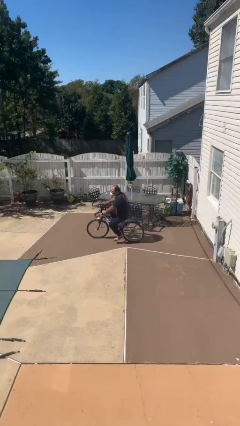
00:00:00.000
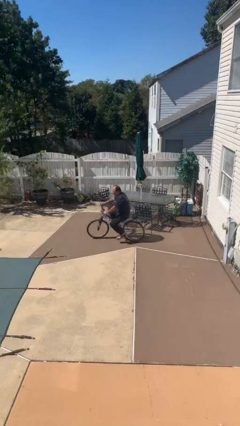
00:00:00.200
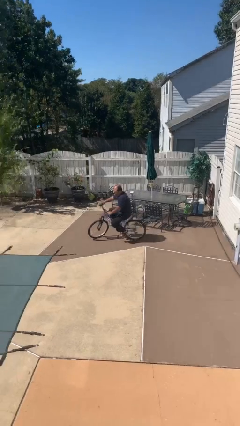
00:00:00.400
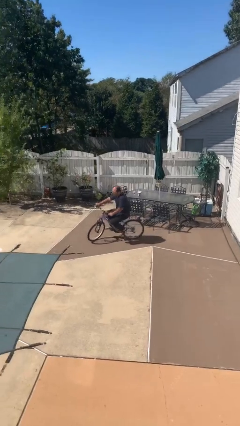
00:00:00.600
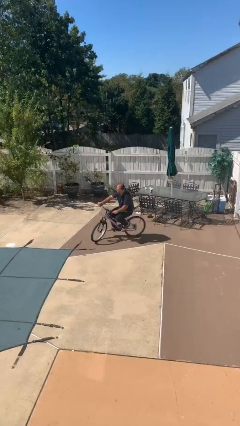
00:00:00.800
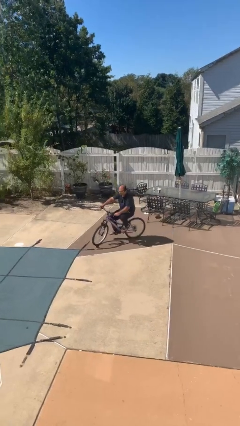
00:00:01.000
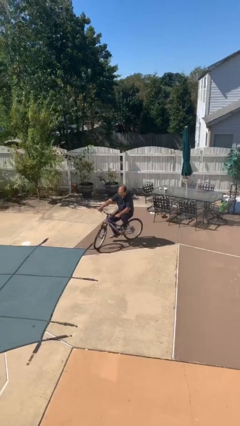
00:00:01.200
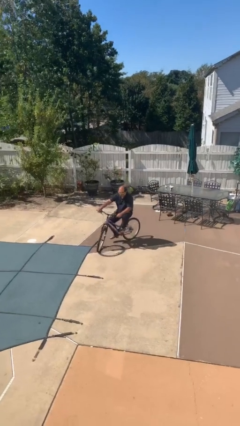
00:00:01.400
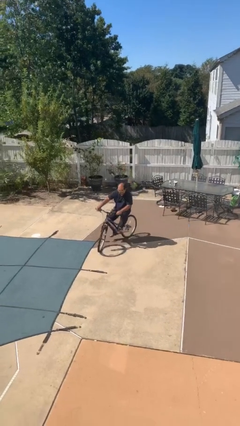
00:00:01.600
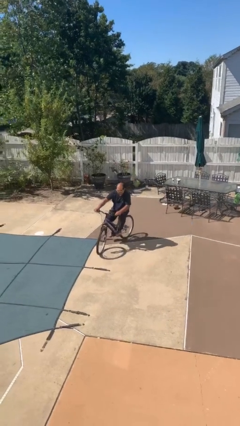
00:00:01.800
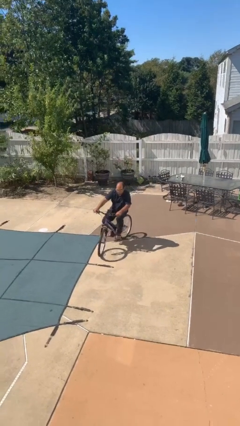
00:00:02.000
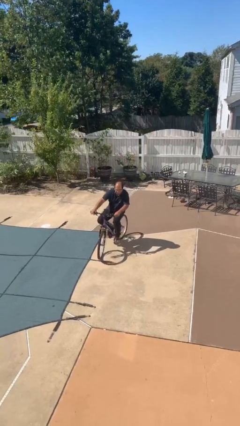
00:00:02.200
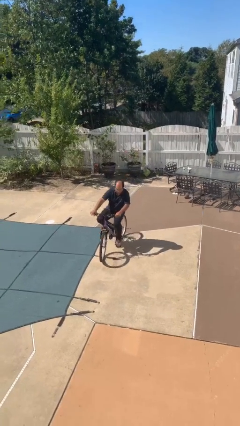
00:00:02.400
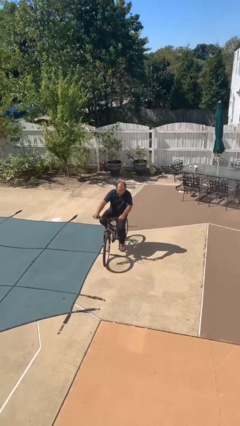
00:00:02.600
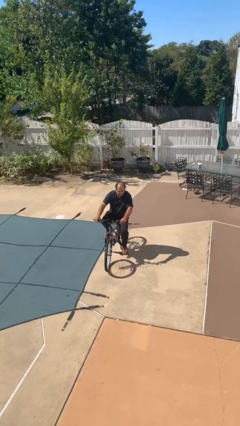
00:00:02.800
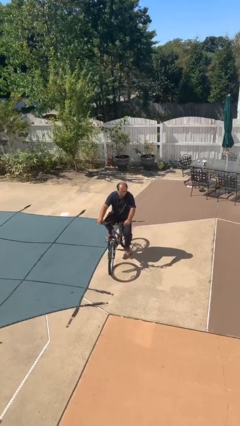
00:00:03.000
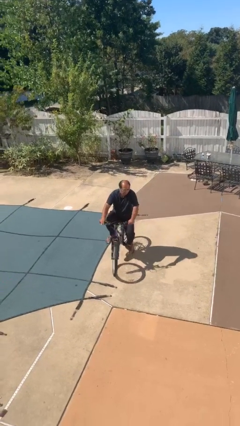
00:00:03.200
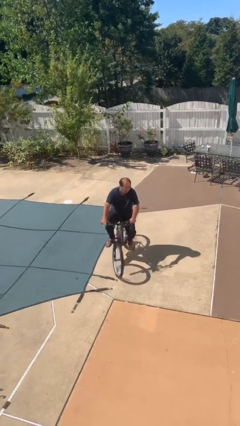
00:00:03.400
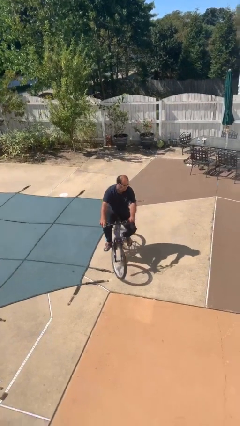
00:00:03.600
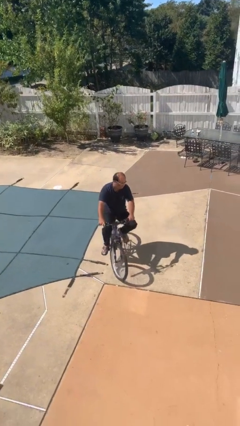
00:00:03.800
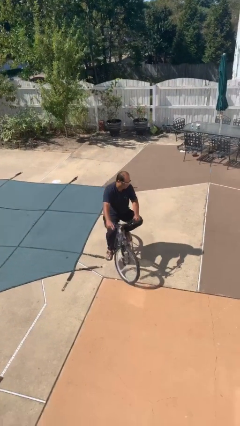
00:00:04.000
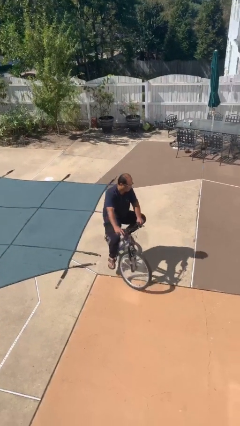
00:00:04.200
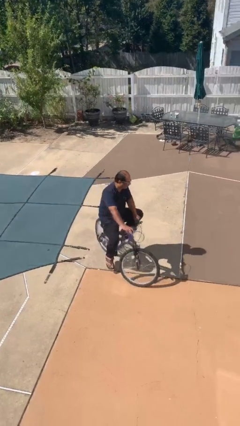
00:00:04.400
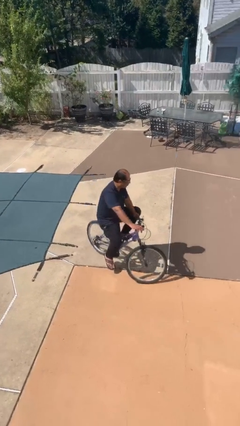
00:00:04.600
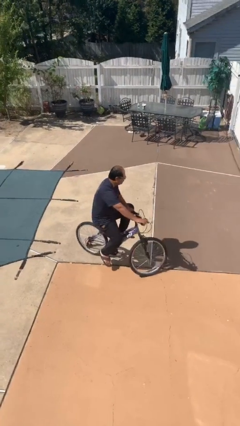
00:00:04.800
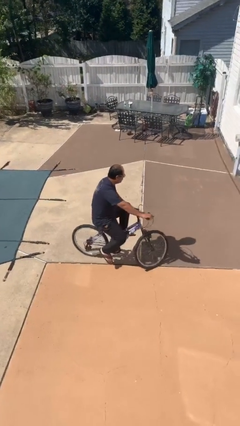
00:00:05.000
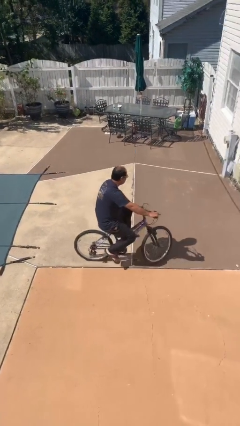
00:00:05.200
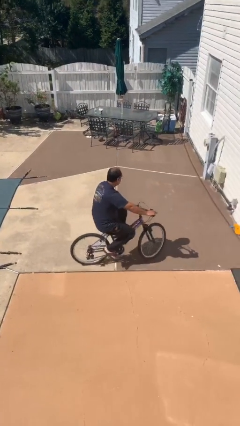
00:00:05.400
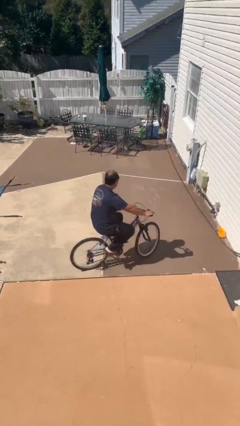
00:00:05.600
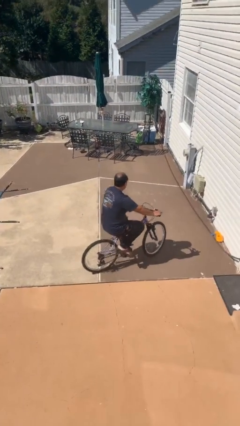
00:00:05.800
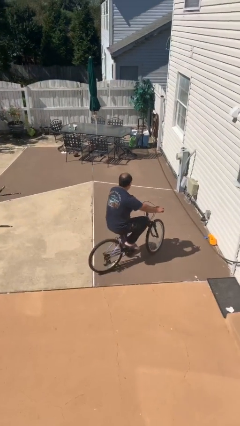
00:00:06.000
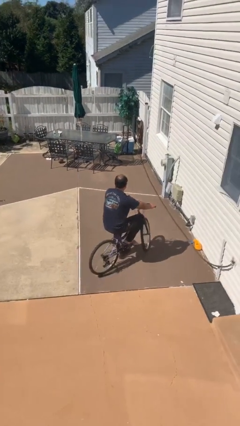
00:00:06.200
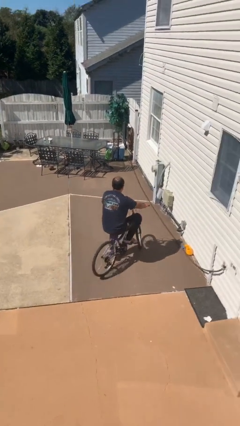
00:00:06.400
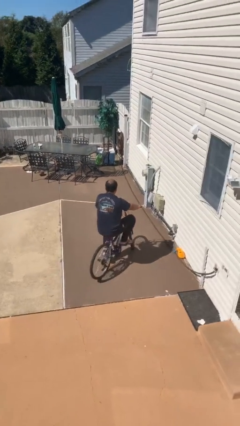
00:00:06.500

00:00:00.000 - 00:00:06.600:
person rides bicycle

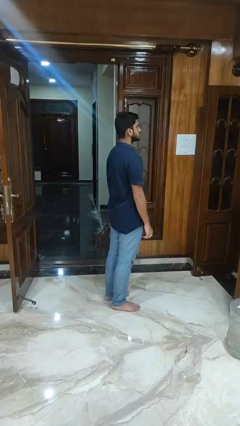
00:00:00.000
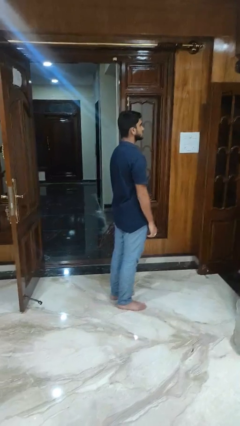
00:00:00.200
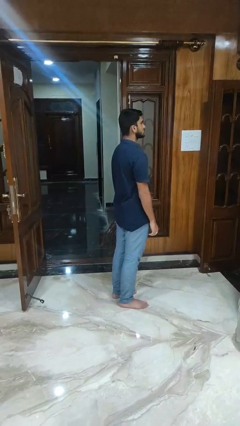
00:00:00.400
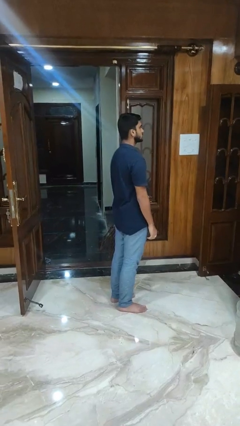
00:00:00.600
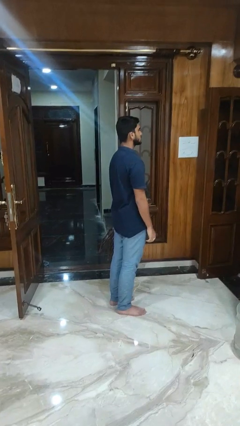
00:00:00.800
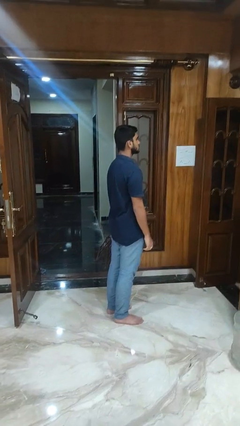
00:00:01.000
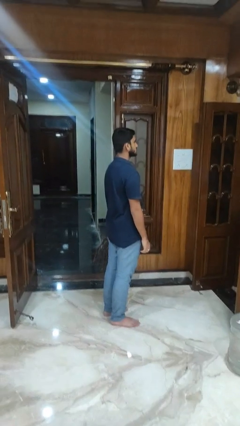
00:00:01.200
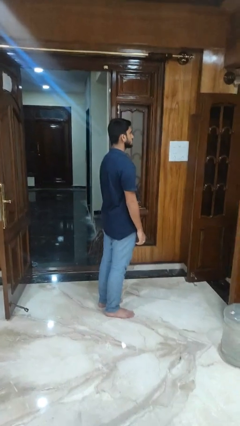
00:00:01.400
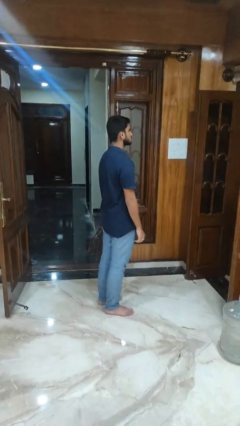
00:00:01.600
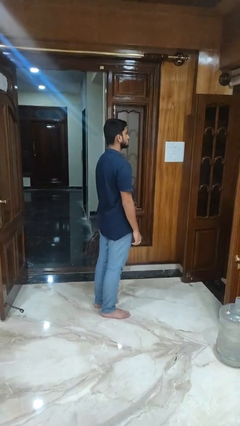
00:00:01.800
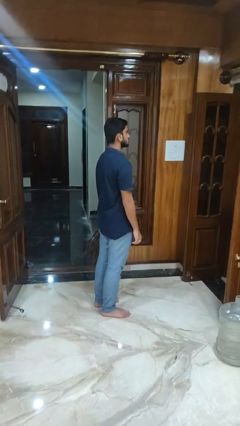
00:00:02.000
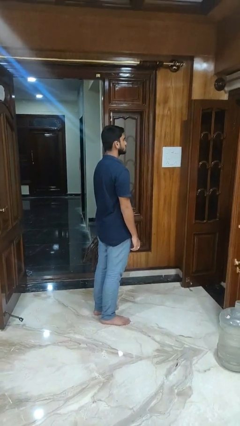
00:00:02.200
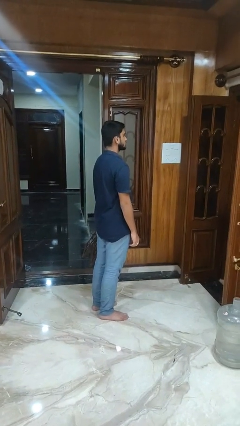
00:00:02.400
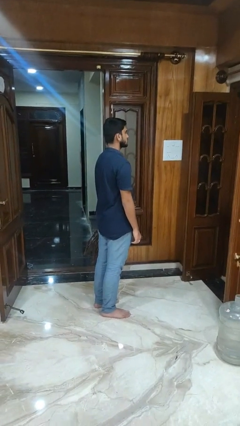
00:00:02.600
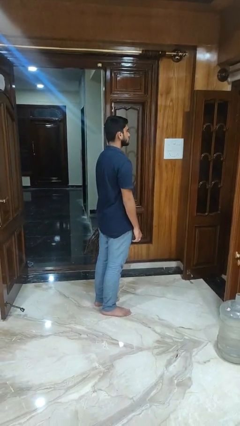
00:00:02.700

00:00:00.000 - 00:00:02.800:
person stands up

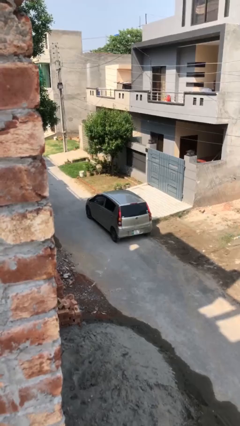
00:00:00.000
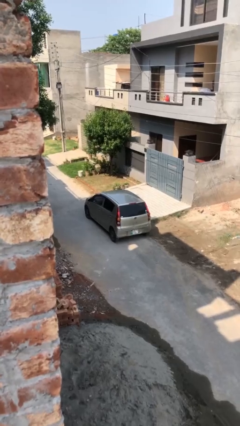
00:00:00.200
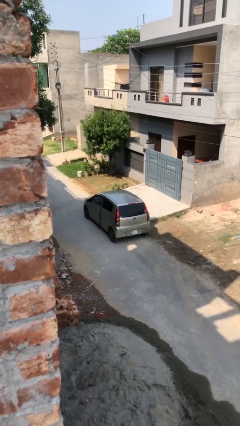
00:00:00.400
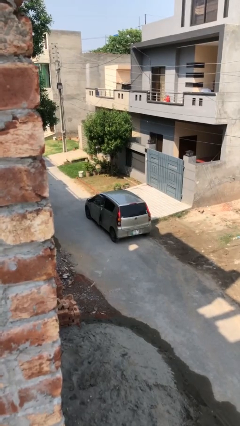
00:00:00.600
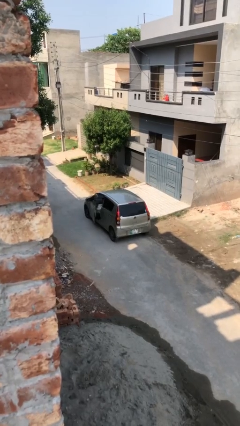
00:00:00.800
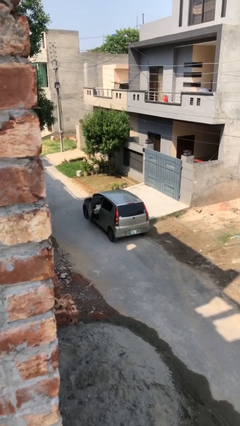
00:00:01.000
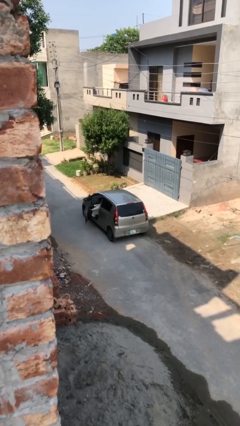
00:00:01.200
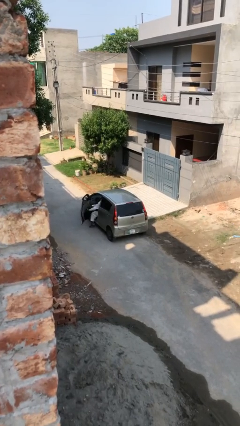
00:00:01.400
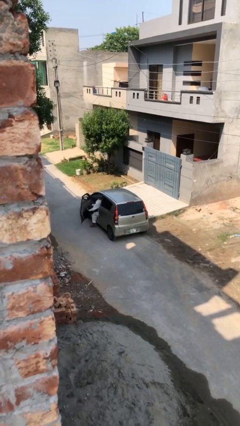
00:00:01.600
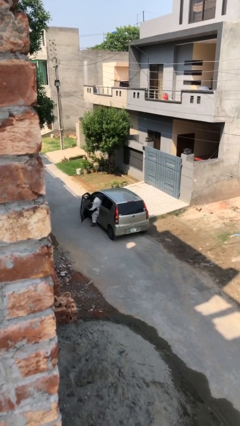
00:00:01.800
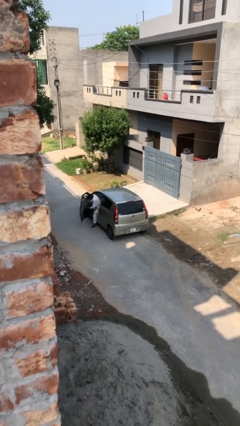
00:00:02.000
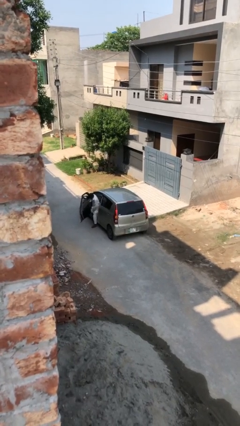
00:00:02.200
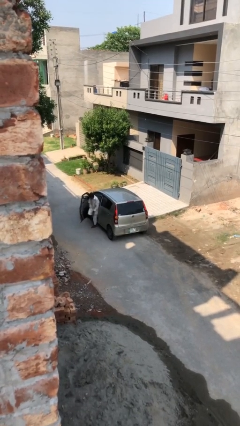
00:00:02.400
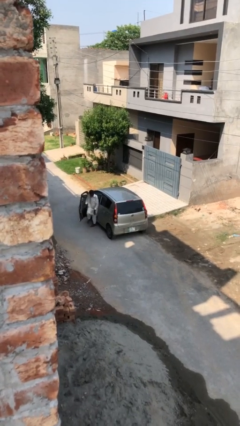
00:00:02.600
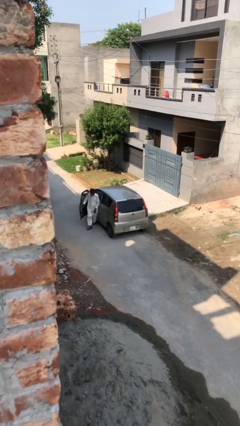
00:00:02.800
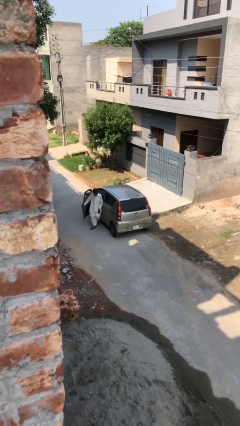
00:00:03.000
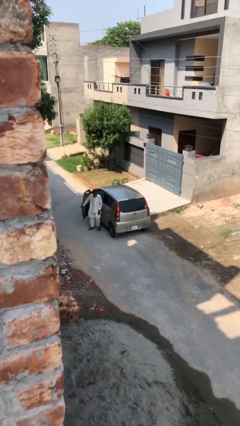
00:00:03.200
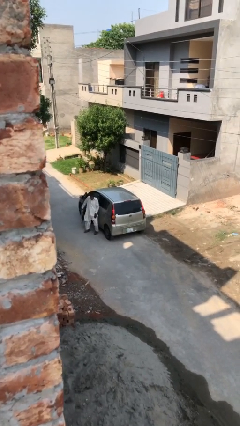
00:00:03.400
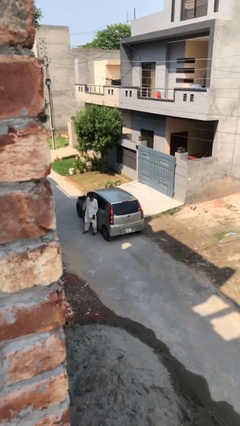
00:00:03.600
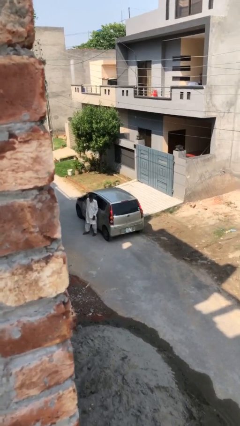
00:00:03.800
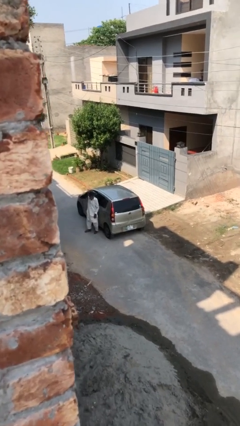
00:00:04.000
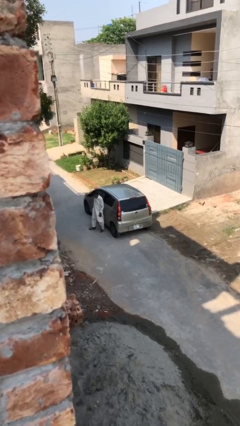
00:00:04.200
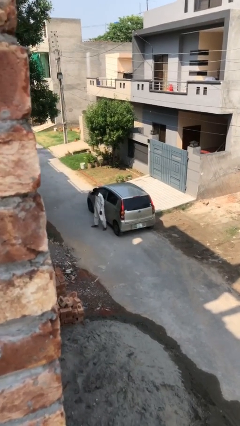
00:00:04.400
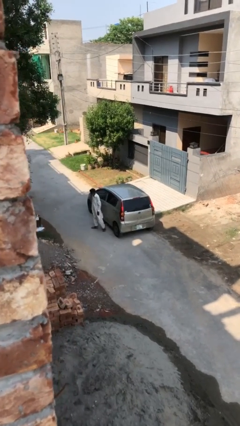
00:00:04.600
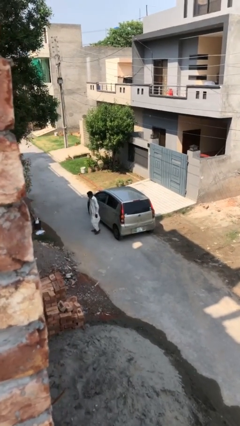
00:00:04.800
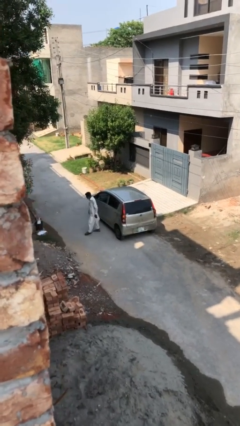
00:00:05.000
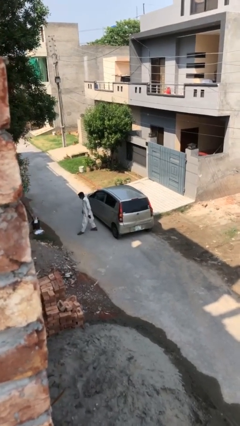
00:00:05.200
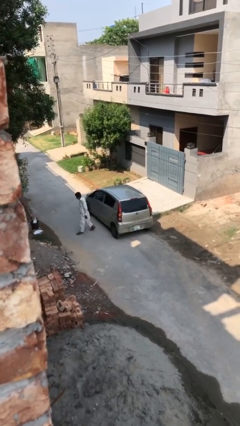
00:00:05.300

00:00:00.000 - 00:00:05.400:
car drops off person

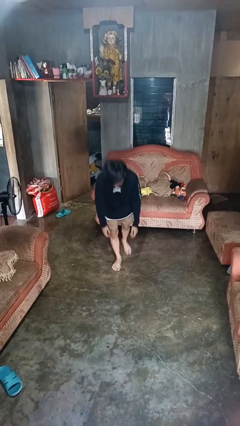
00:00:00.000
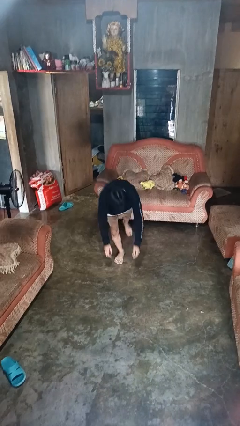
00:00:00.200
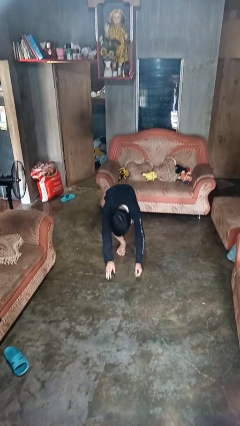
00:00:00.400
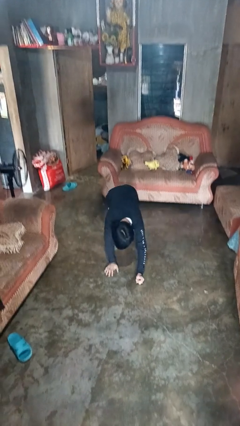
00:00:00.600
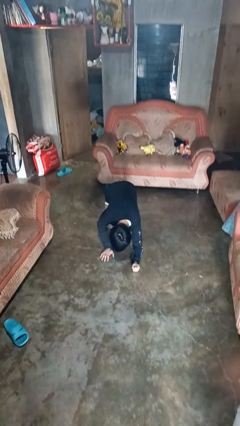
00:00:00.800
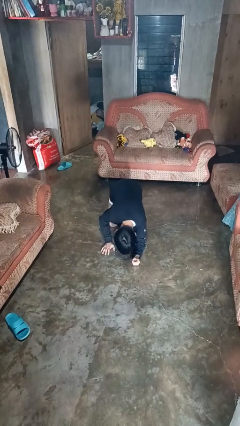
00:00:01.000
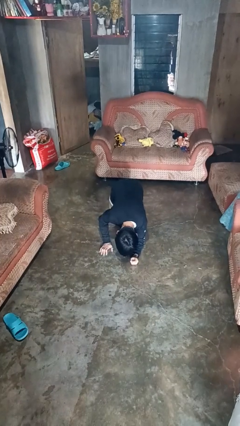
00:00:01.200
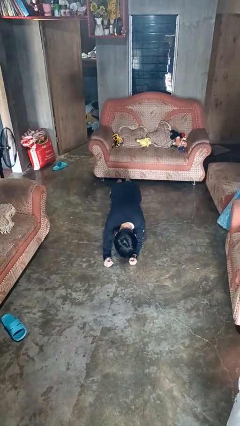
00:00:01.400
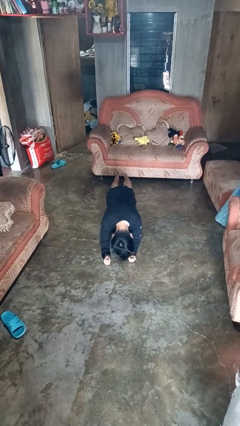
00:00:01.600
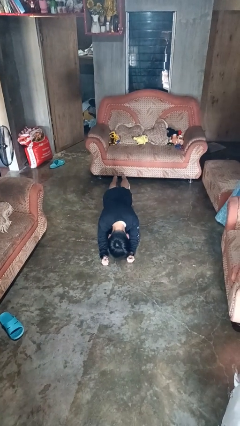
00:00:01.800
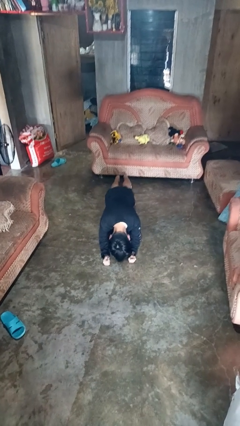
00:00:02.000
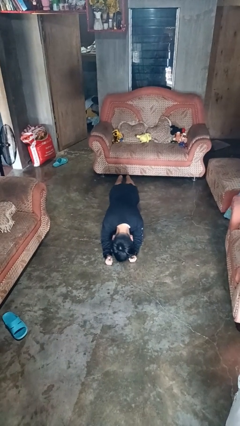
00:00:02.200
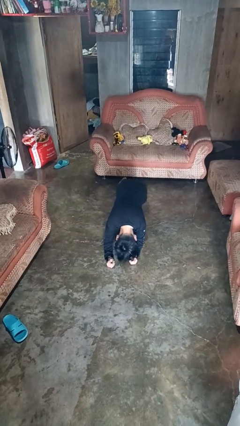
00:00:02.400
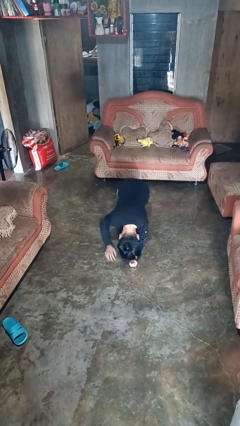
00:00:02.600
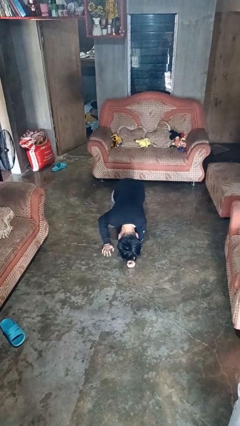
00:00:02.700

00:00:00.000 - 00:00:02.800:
person exercises with plank

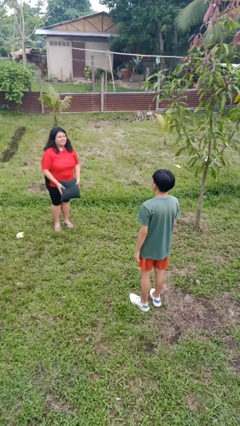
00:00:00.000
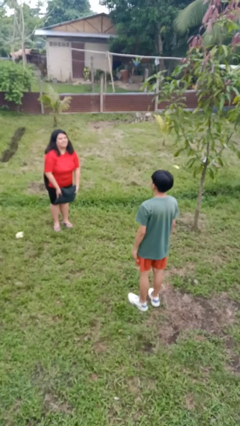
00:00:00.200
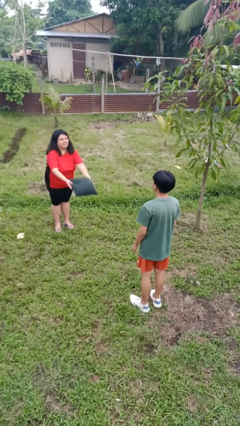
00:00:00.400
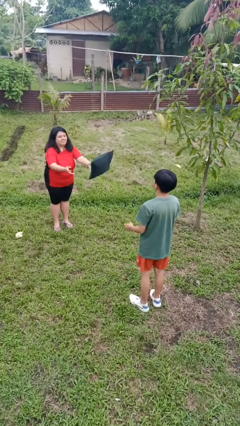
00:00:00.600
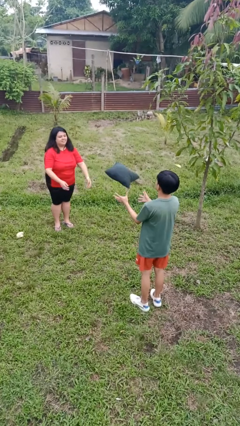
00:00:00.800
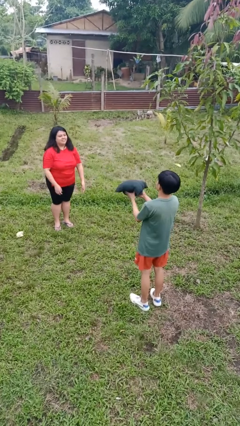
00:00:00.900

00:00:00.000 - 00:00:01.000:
person throws object to person
